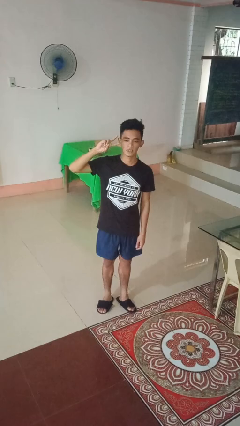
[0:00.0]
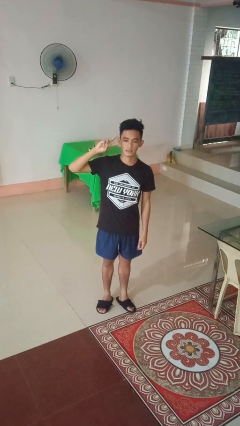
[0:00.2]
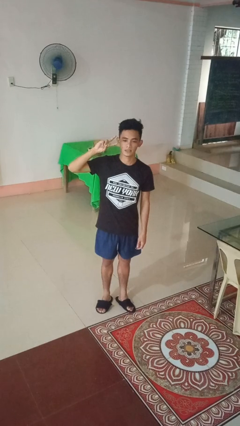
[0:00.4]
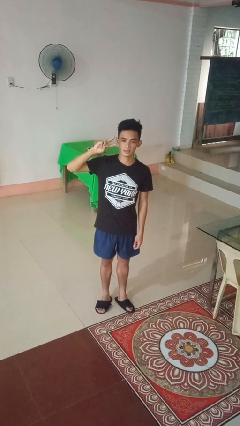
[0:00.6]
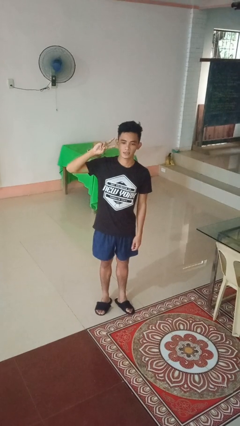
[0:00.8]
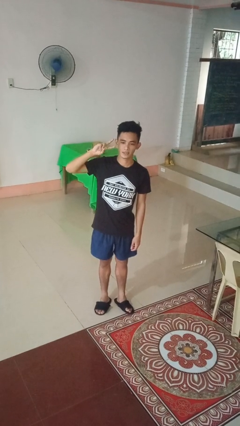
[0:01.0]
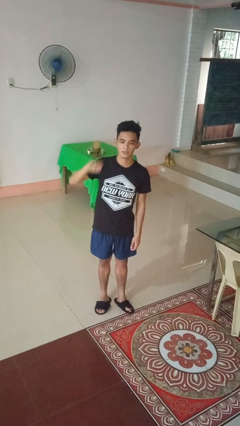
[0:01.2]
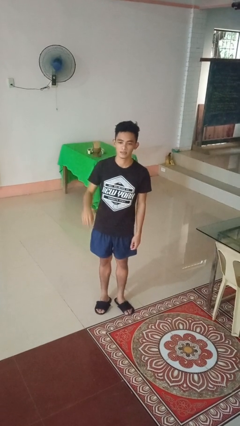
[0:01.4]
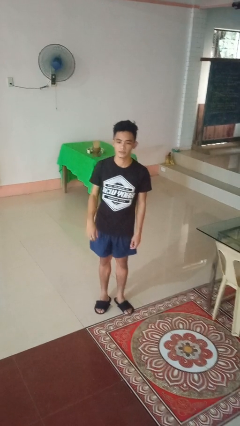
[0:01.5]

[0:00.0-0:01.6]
person gestures peace

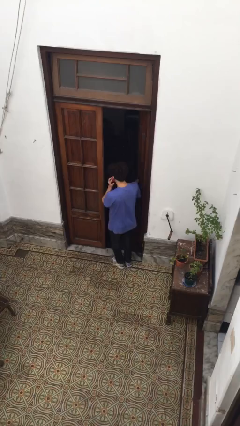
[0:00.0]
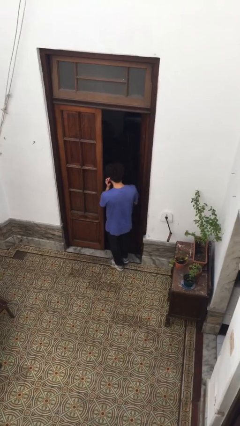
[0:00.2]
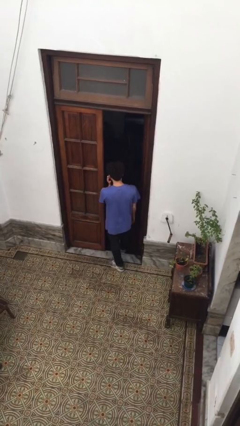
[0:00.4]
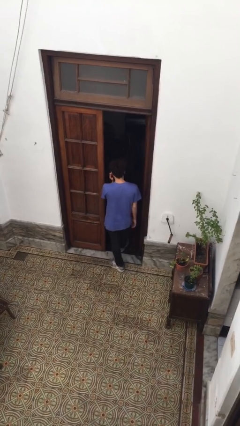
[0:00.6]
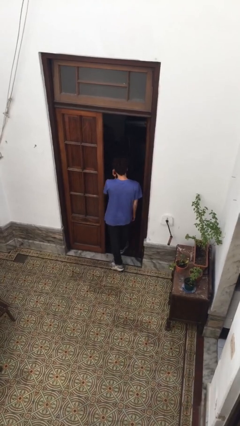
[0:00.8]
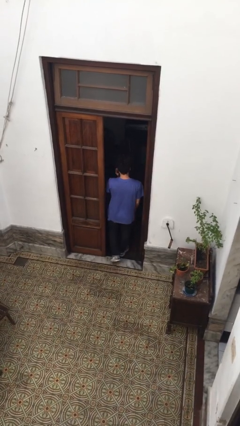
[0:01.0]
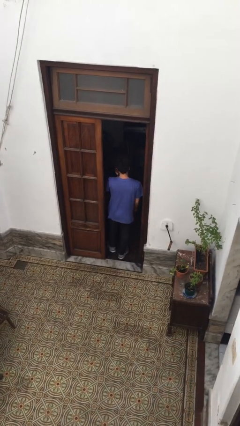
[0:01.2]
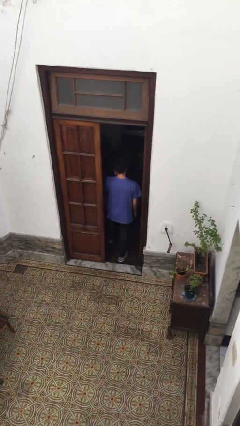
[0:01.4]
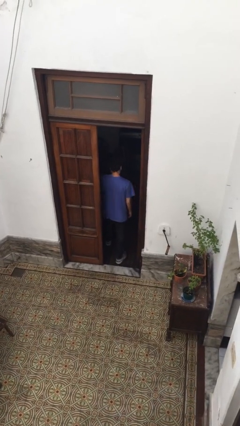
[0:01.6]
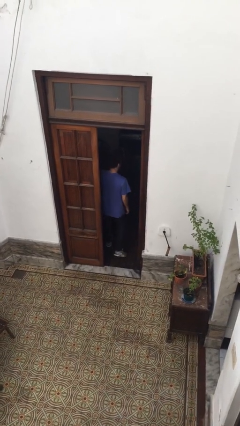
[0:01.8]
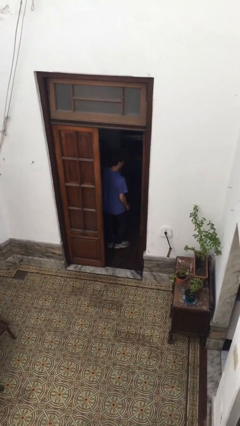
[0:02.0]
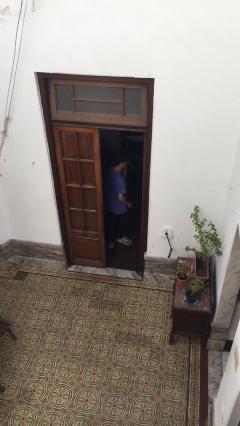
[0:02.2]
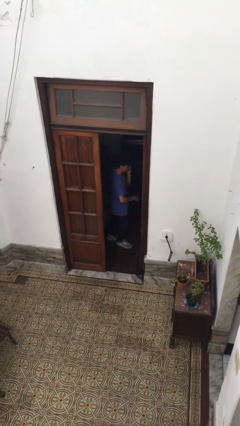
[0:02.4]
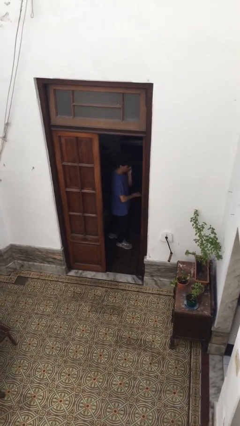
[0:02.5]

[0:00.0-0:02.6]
person exits scene through structure

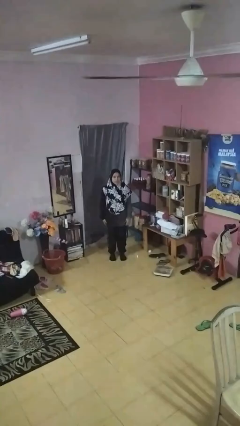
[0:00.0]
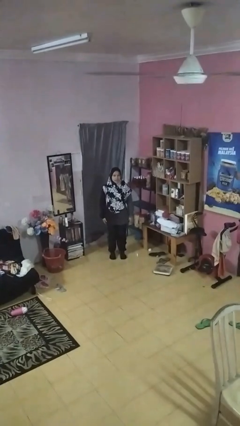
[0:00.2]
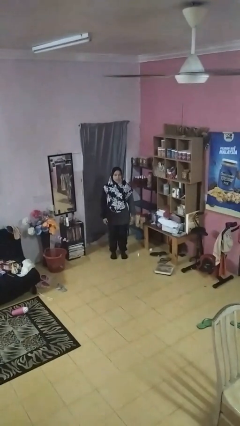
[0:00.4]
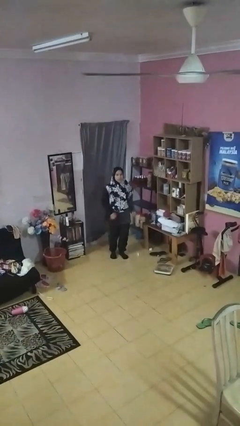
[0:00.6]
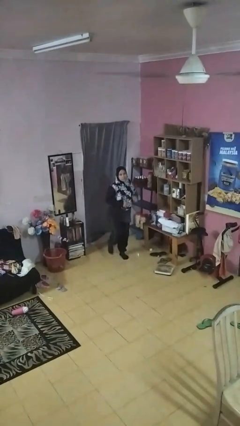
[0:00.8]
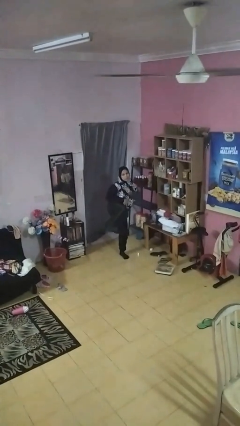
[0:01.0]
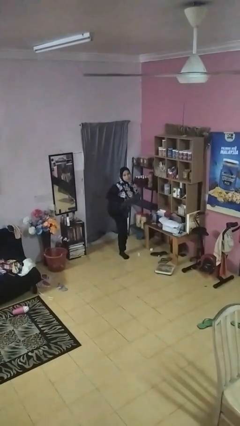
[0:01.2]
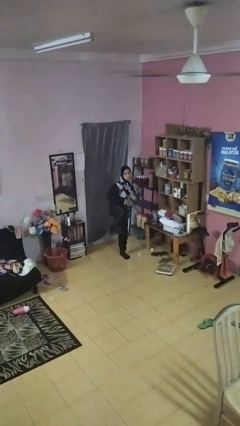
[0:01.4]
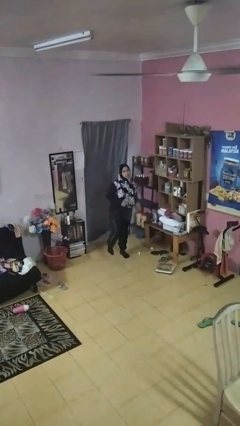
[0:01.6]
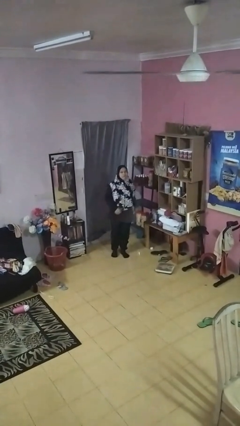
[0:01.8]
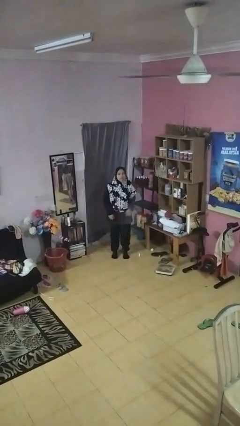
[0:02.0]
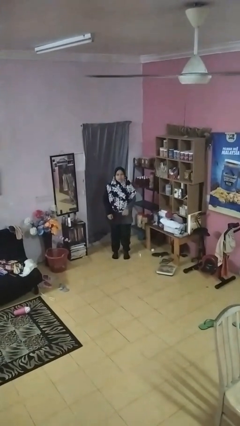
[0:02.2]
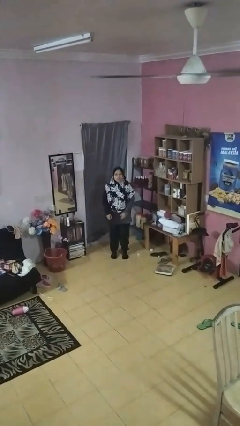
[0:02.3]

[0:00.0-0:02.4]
person karate kicks

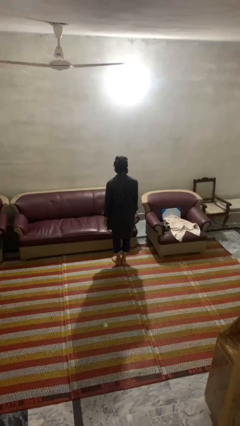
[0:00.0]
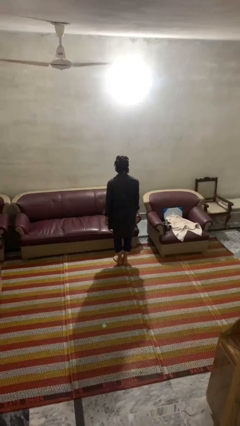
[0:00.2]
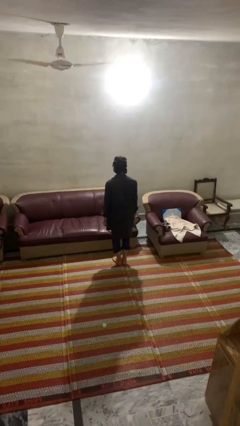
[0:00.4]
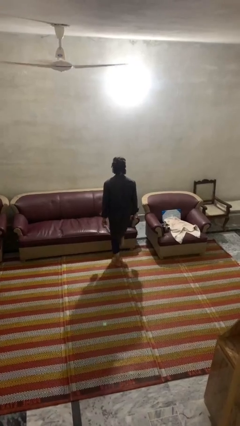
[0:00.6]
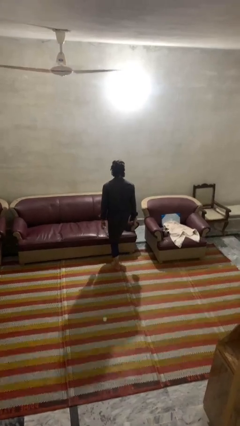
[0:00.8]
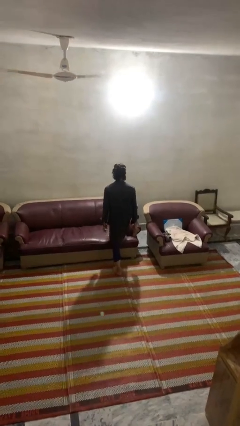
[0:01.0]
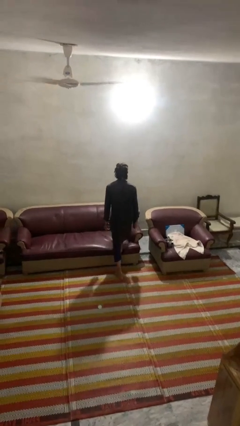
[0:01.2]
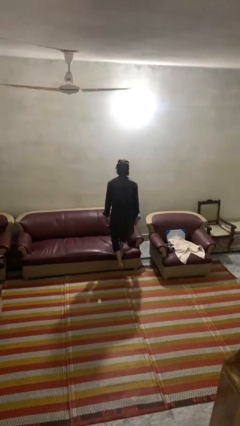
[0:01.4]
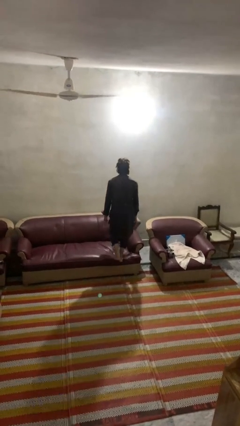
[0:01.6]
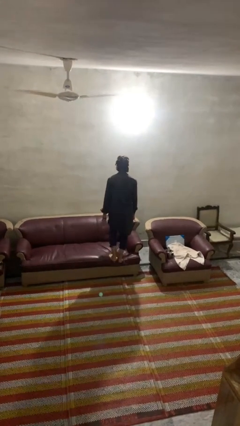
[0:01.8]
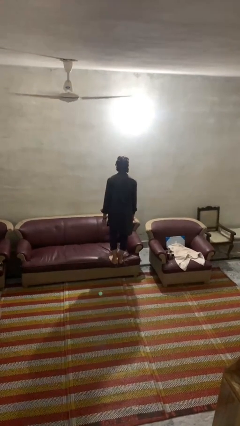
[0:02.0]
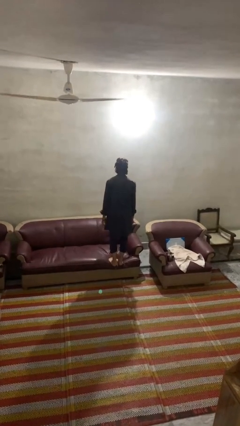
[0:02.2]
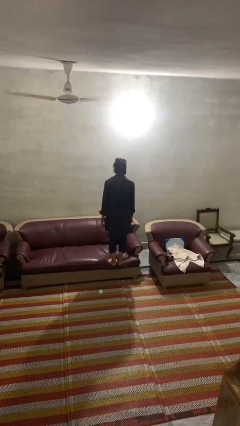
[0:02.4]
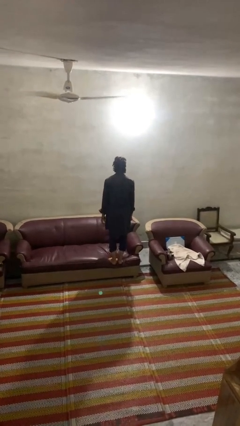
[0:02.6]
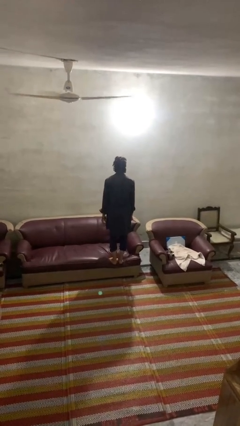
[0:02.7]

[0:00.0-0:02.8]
person climbs on couch

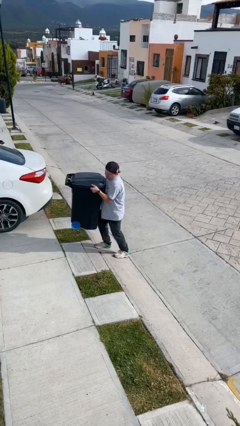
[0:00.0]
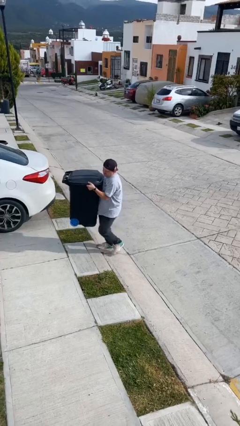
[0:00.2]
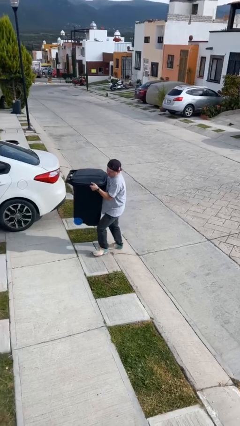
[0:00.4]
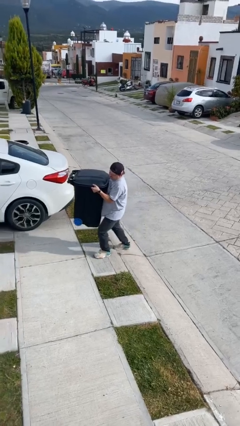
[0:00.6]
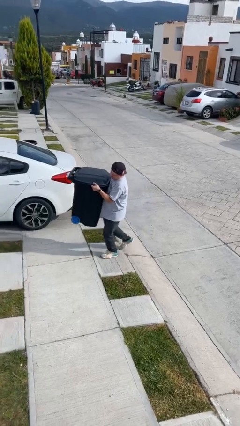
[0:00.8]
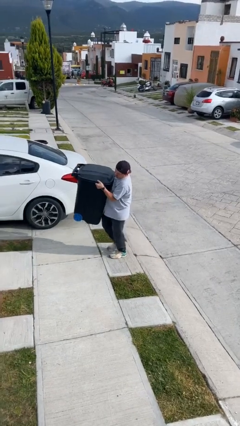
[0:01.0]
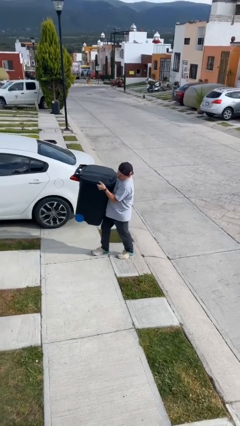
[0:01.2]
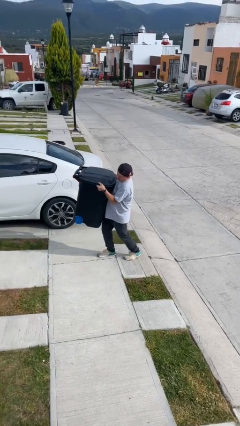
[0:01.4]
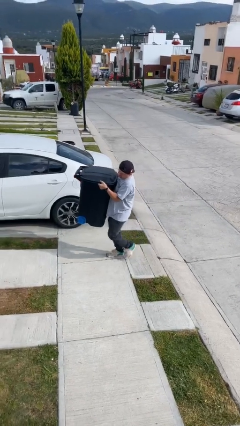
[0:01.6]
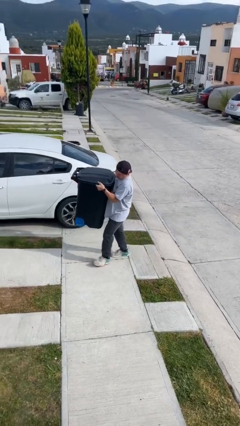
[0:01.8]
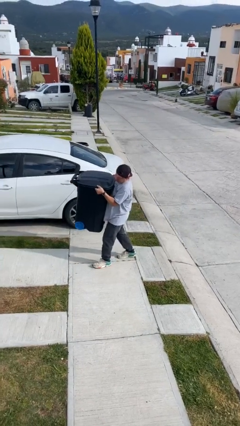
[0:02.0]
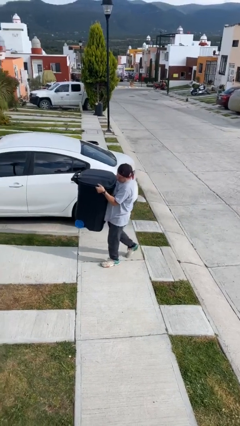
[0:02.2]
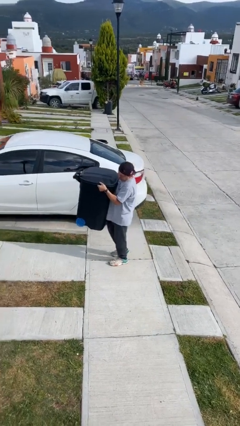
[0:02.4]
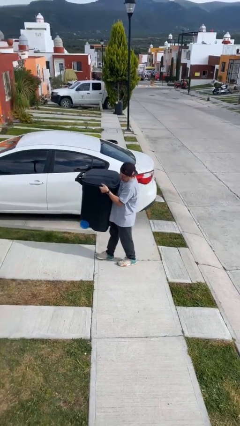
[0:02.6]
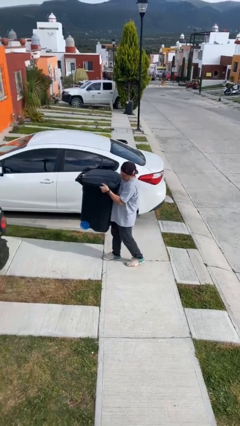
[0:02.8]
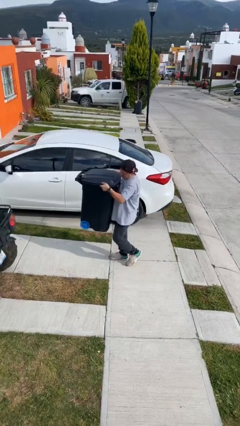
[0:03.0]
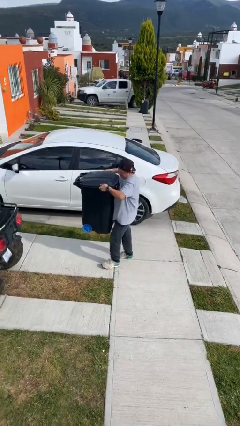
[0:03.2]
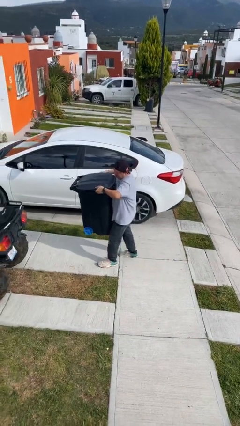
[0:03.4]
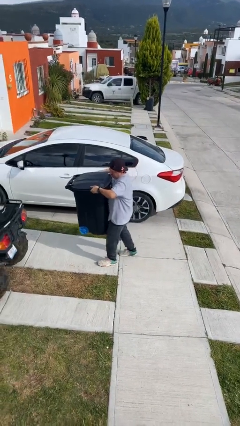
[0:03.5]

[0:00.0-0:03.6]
person carries heavy object

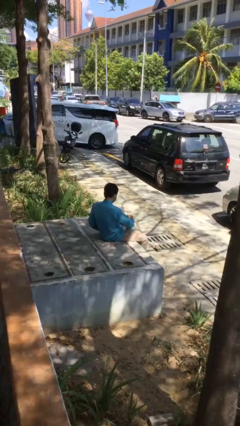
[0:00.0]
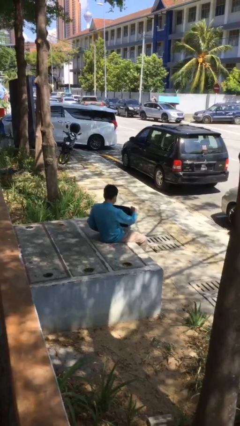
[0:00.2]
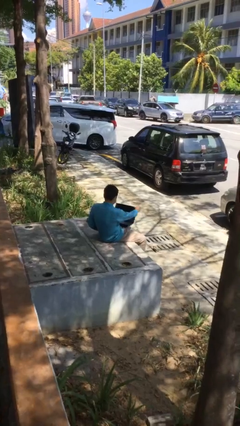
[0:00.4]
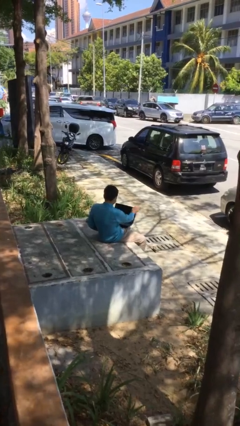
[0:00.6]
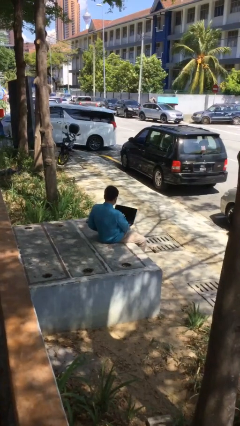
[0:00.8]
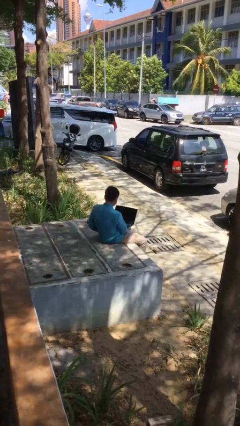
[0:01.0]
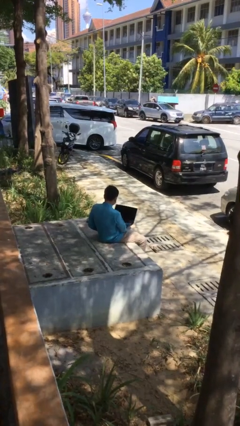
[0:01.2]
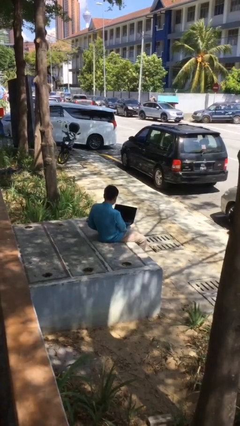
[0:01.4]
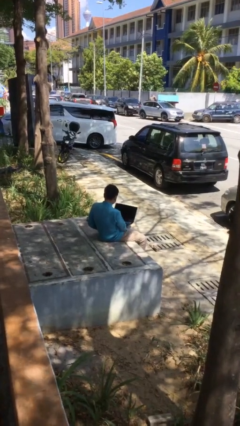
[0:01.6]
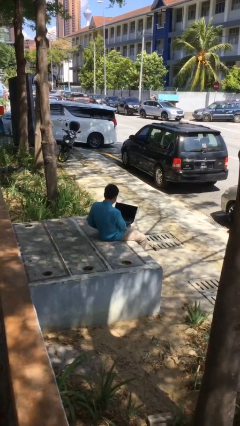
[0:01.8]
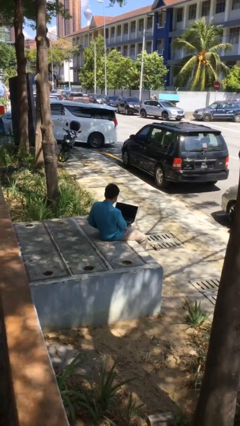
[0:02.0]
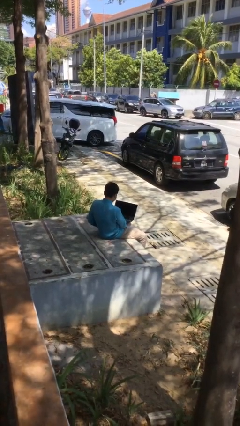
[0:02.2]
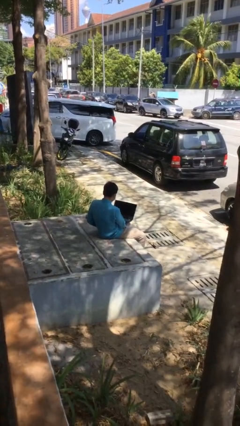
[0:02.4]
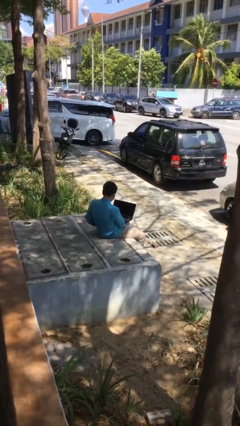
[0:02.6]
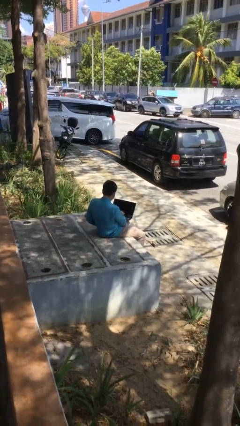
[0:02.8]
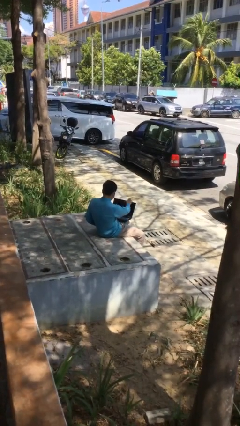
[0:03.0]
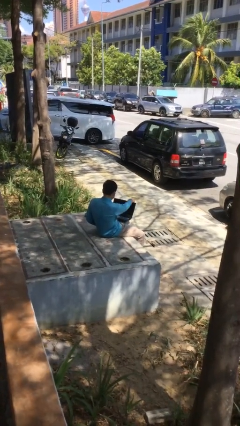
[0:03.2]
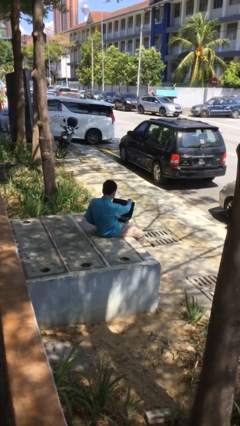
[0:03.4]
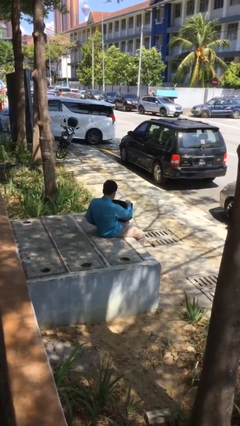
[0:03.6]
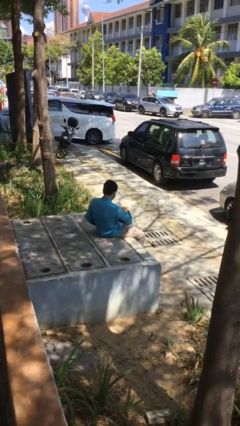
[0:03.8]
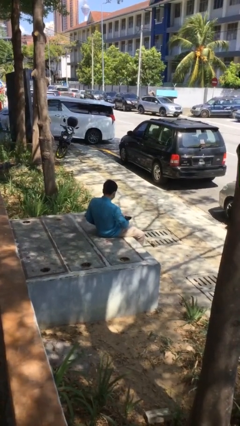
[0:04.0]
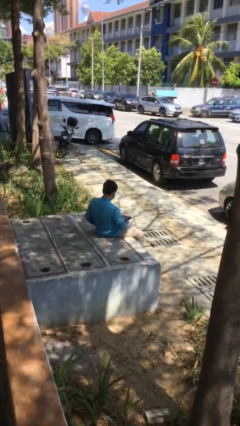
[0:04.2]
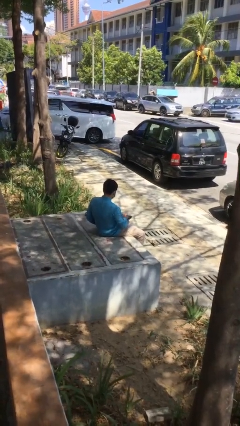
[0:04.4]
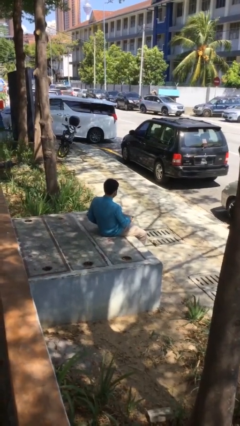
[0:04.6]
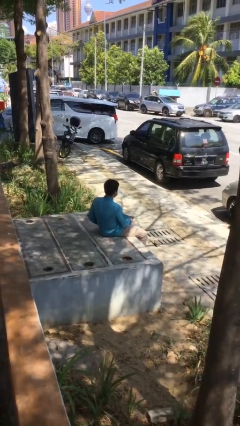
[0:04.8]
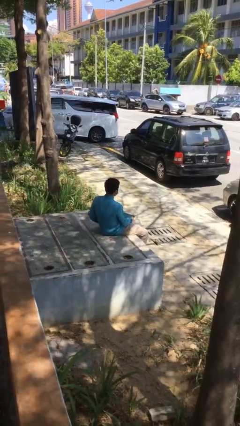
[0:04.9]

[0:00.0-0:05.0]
person interacts with laptop
